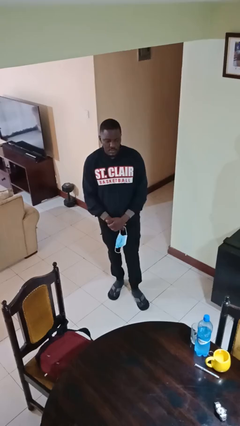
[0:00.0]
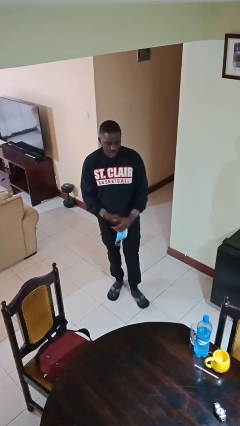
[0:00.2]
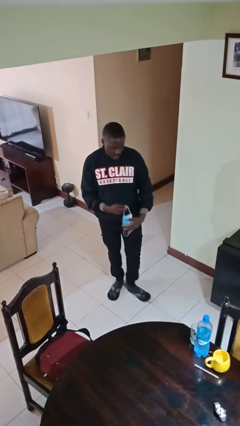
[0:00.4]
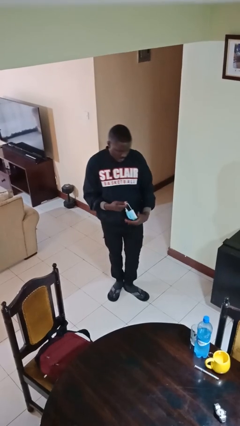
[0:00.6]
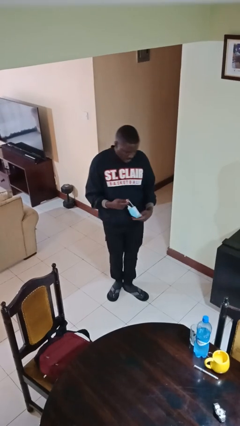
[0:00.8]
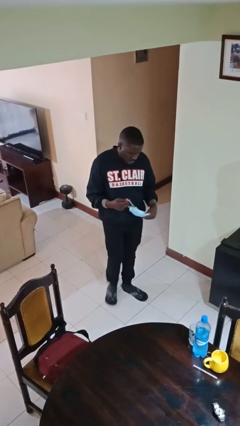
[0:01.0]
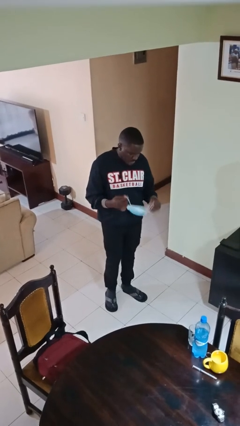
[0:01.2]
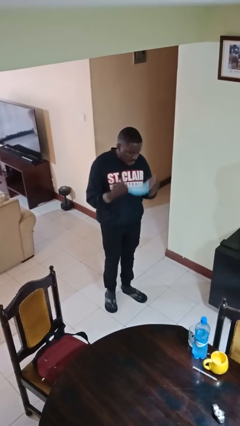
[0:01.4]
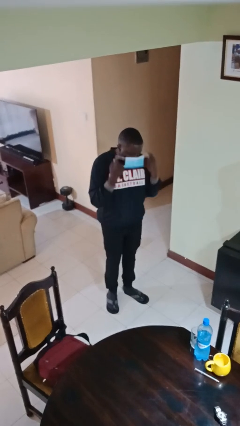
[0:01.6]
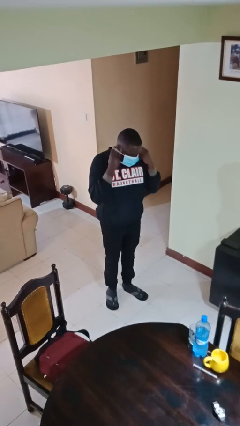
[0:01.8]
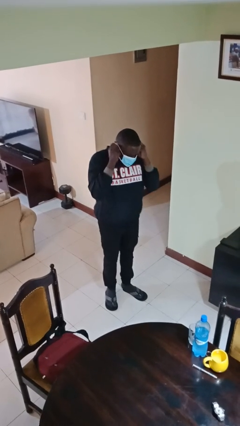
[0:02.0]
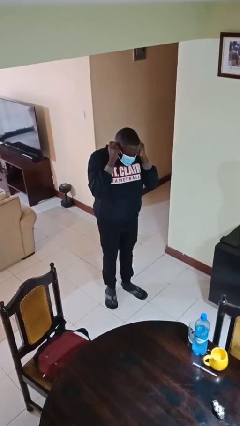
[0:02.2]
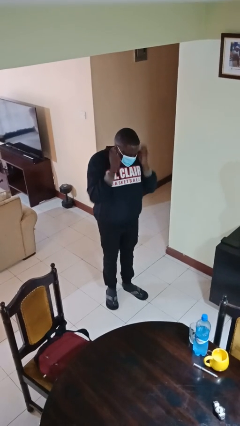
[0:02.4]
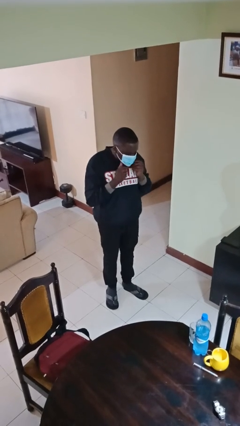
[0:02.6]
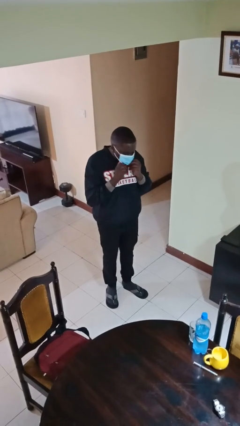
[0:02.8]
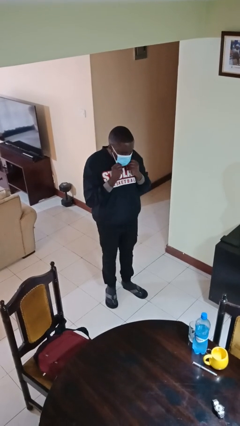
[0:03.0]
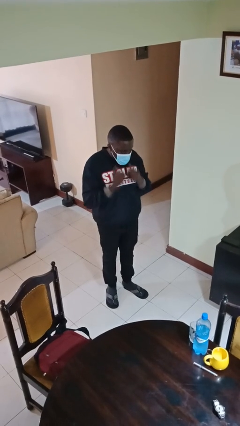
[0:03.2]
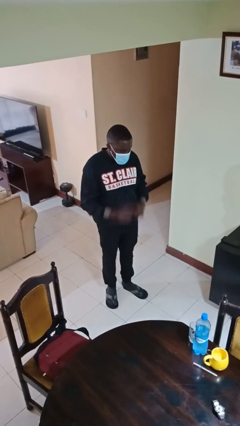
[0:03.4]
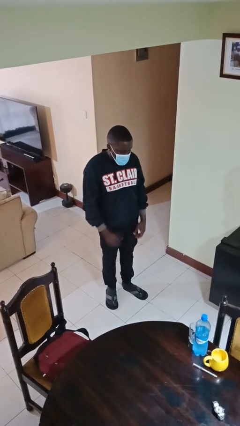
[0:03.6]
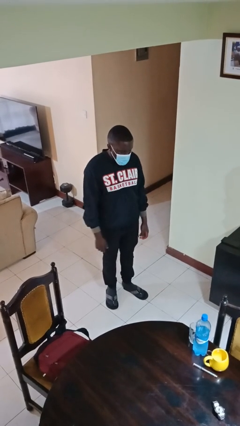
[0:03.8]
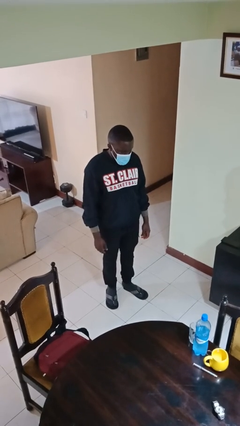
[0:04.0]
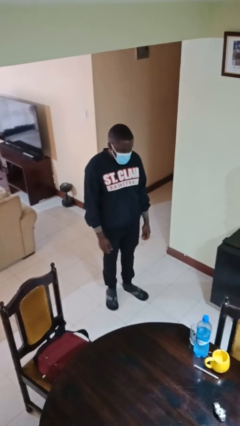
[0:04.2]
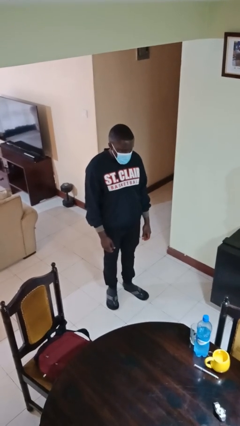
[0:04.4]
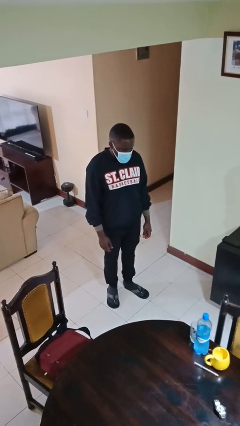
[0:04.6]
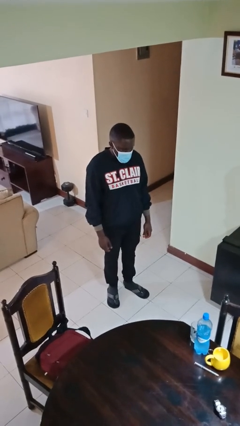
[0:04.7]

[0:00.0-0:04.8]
person puts on facemask

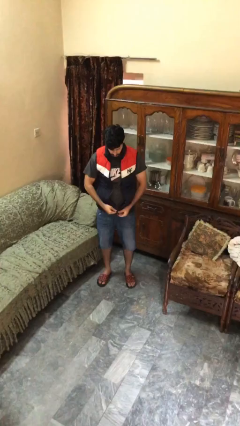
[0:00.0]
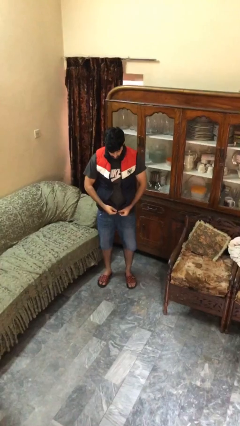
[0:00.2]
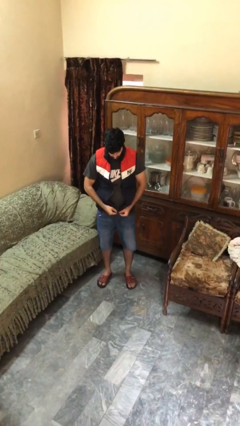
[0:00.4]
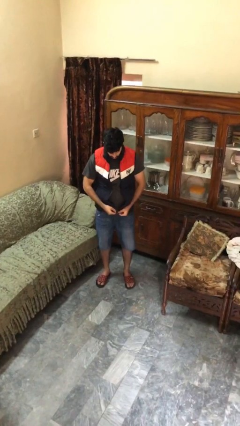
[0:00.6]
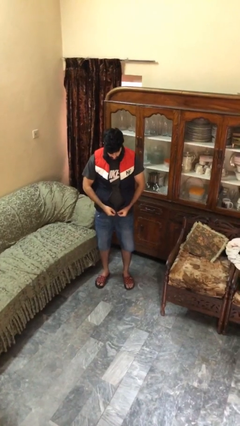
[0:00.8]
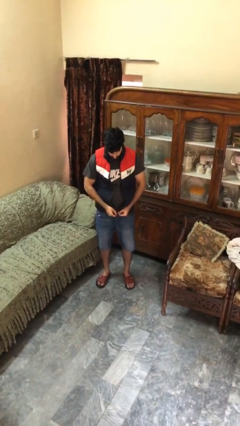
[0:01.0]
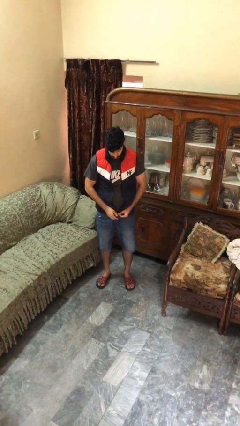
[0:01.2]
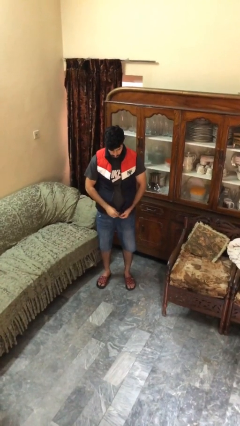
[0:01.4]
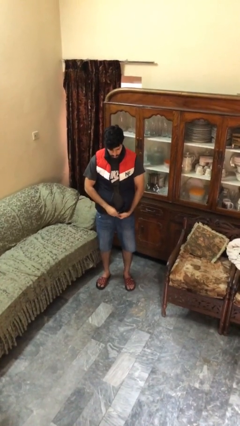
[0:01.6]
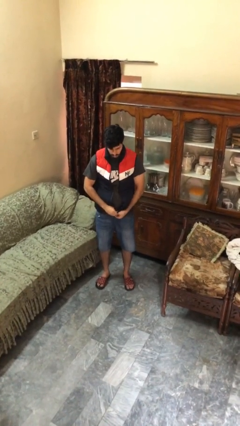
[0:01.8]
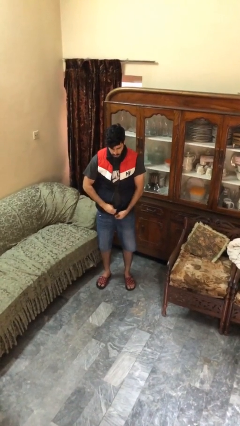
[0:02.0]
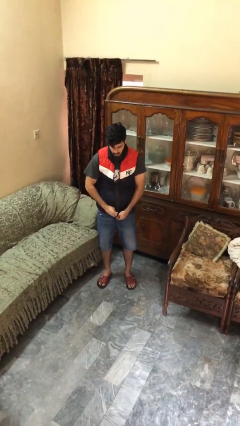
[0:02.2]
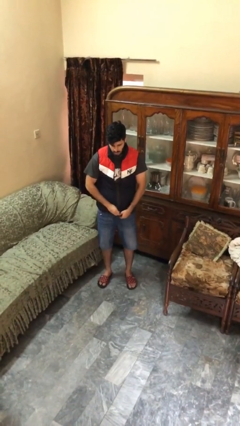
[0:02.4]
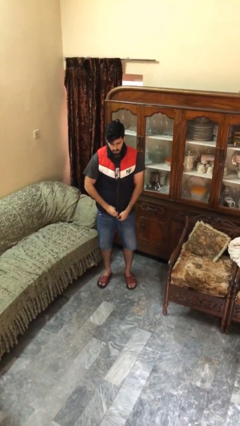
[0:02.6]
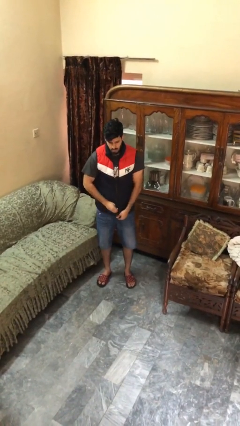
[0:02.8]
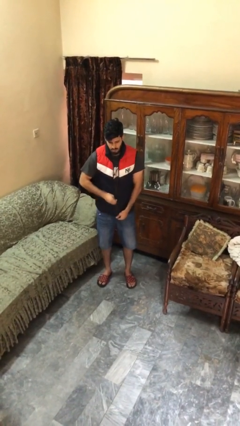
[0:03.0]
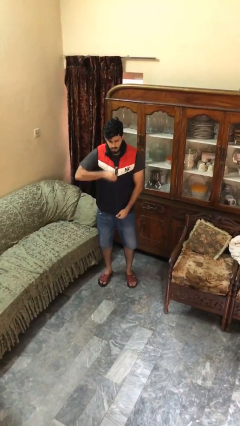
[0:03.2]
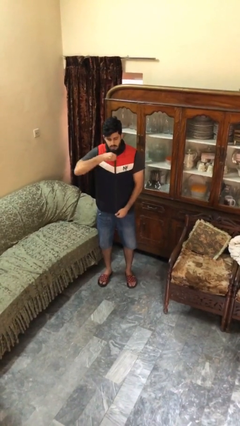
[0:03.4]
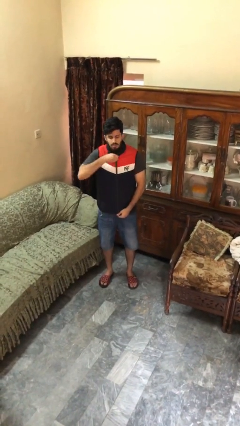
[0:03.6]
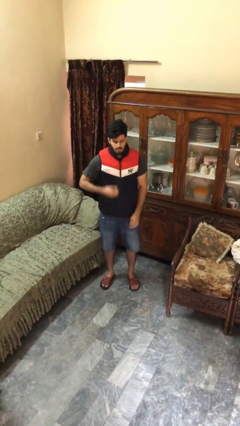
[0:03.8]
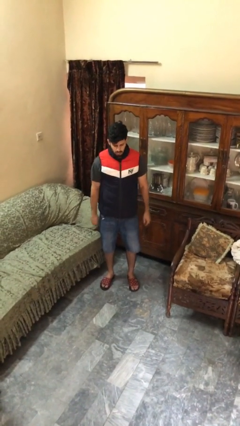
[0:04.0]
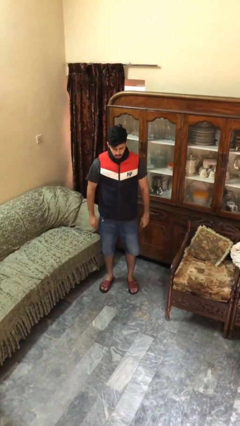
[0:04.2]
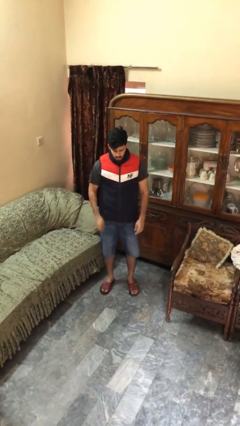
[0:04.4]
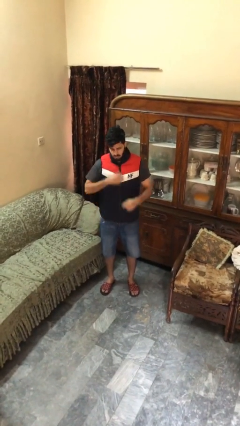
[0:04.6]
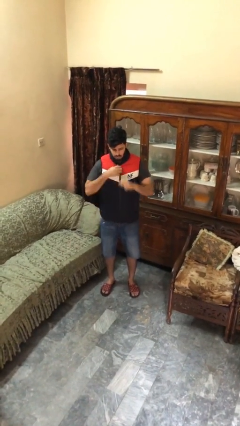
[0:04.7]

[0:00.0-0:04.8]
person zips up jacket

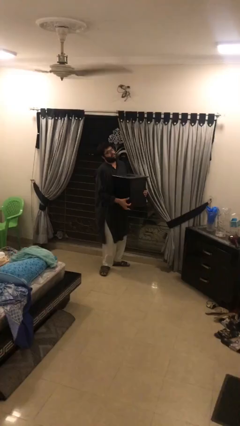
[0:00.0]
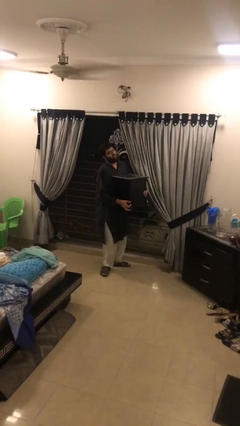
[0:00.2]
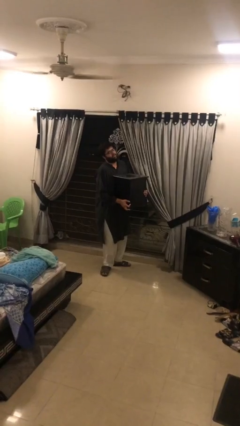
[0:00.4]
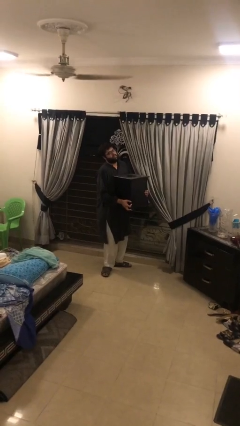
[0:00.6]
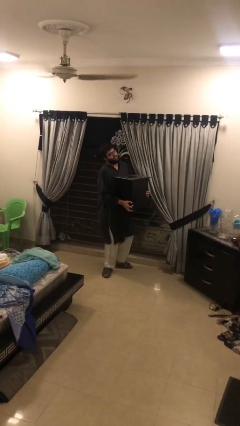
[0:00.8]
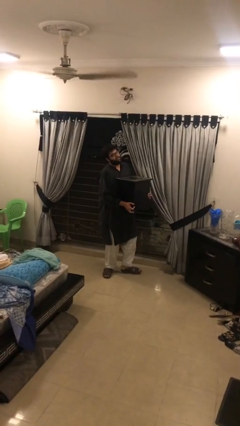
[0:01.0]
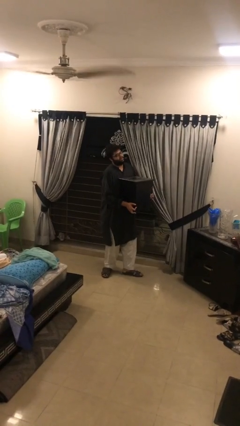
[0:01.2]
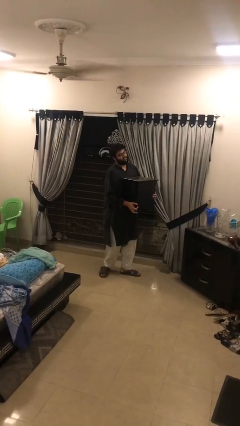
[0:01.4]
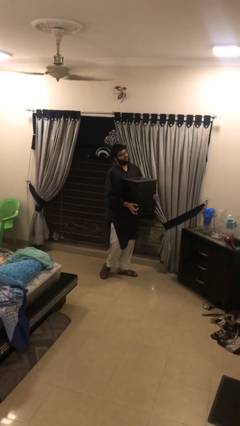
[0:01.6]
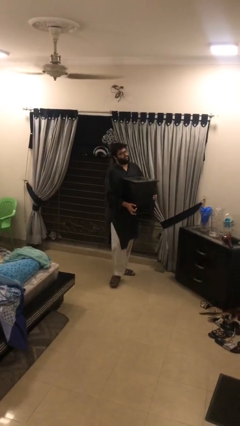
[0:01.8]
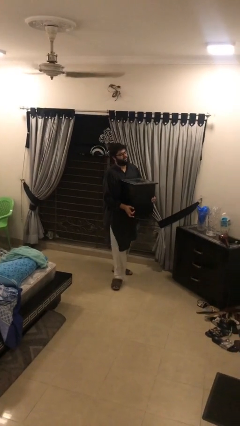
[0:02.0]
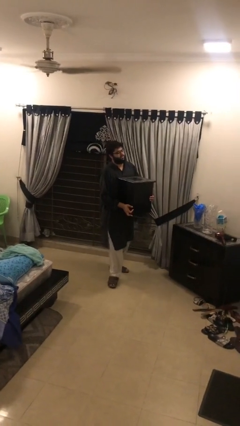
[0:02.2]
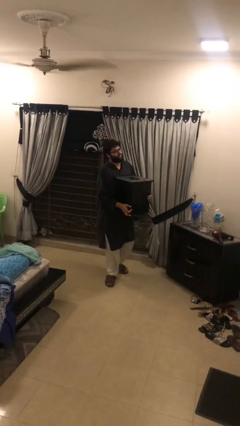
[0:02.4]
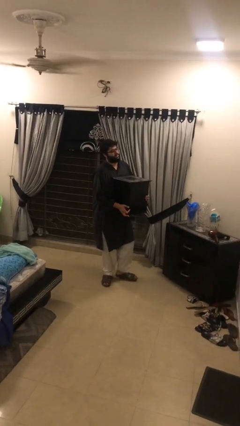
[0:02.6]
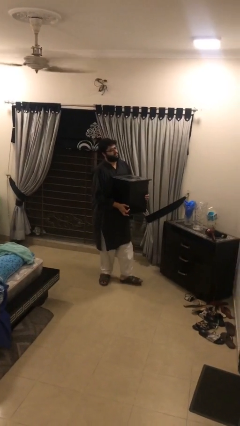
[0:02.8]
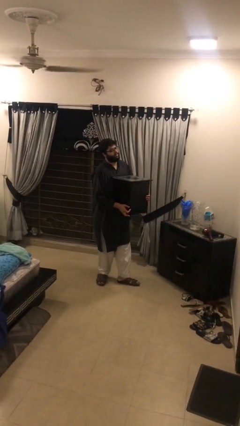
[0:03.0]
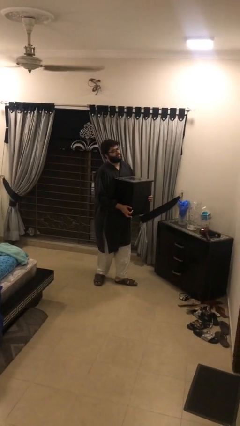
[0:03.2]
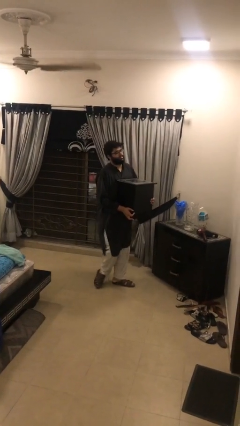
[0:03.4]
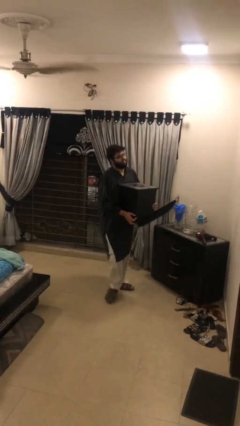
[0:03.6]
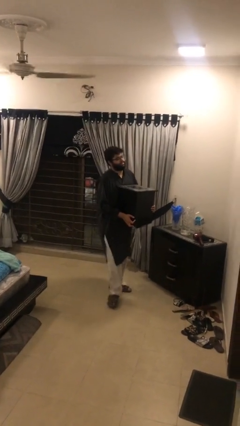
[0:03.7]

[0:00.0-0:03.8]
person carries heavy object

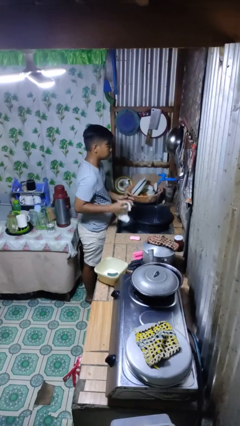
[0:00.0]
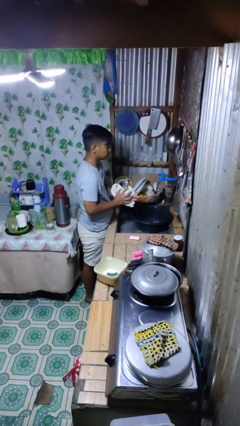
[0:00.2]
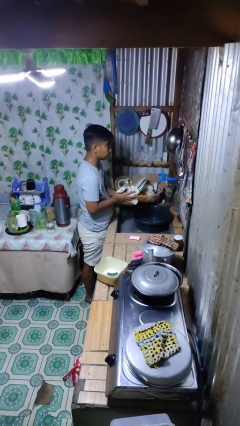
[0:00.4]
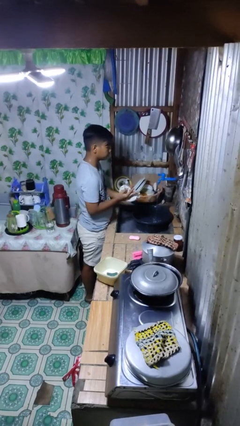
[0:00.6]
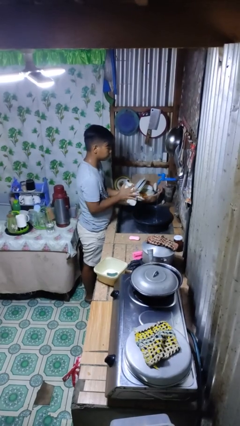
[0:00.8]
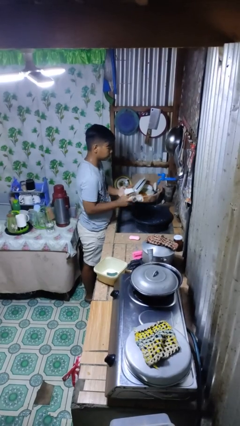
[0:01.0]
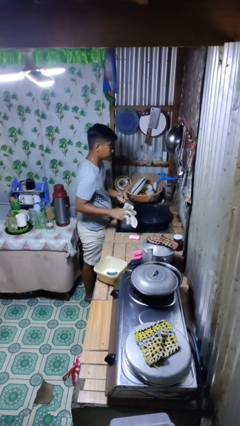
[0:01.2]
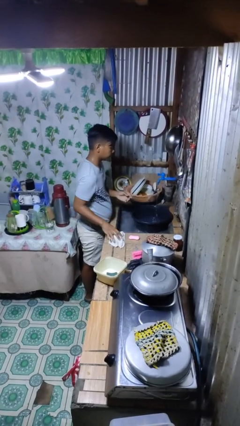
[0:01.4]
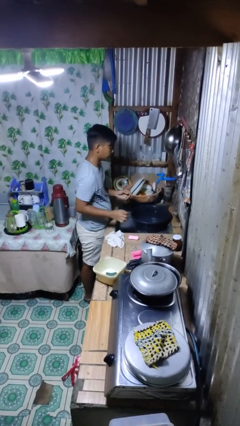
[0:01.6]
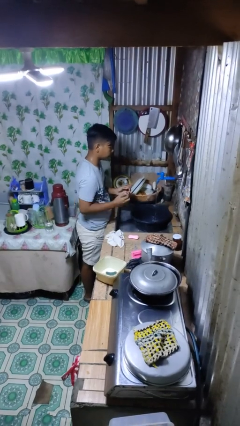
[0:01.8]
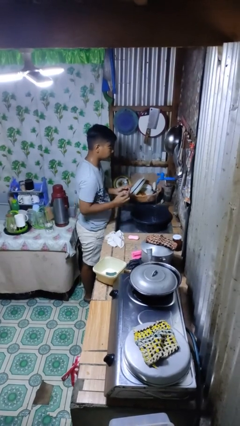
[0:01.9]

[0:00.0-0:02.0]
person dries hands with towel

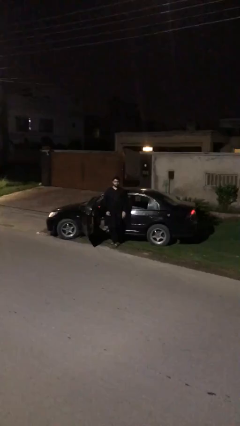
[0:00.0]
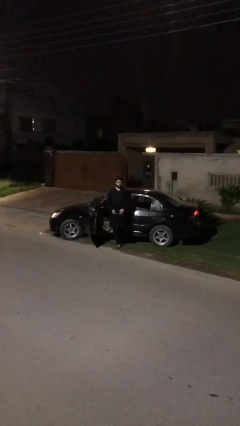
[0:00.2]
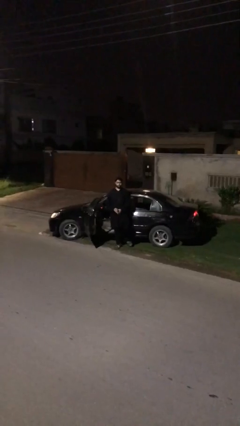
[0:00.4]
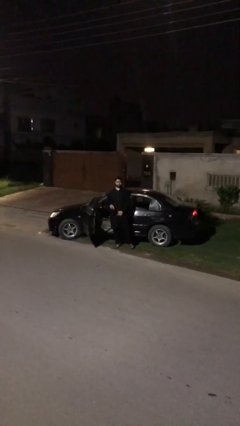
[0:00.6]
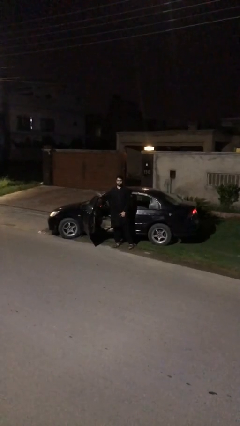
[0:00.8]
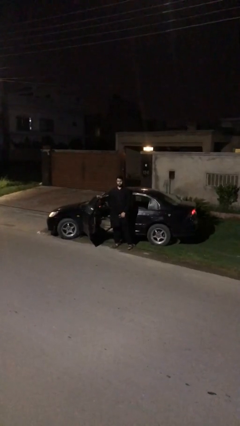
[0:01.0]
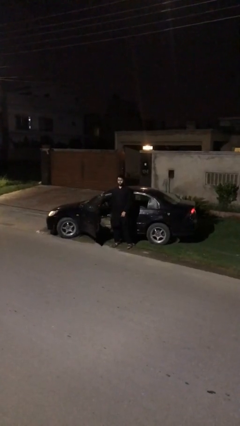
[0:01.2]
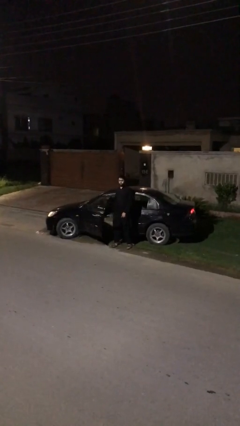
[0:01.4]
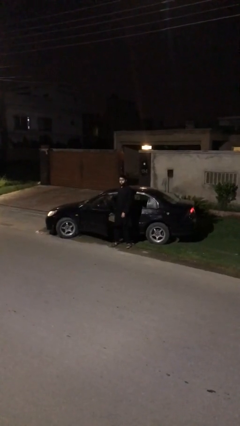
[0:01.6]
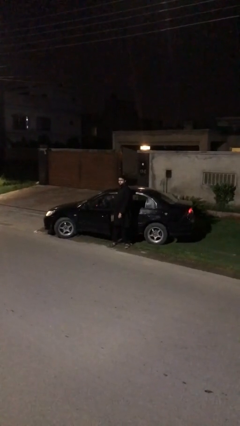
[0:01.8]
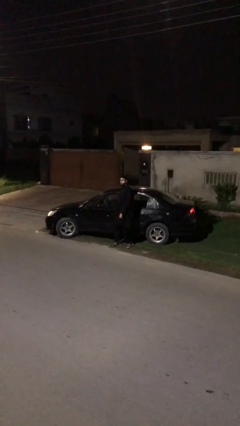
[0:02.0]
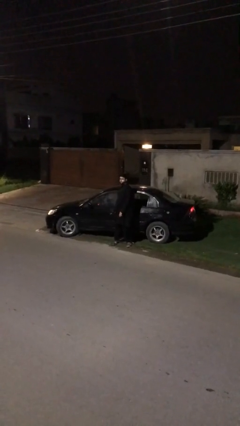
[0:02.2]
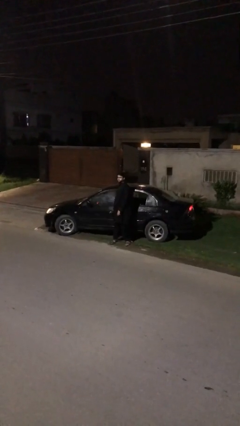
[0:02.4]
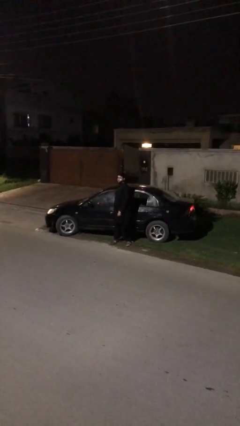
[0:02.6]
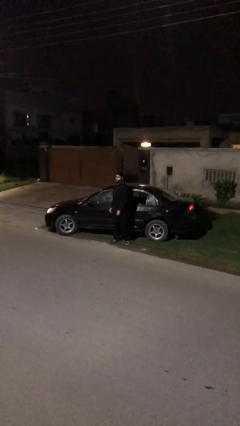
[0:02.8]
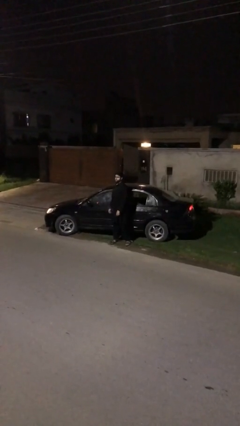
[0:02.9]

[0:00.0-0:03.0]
person closes car door
